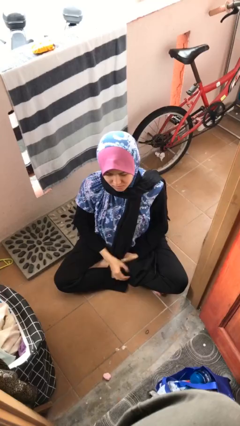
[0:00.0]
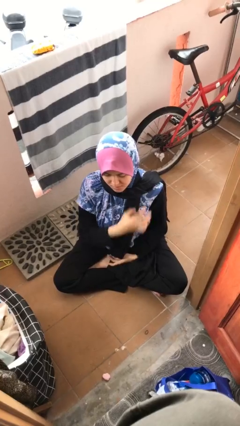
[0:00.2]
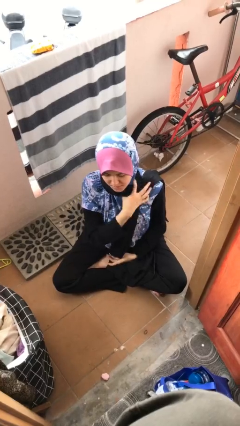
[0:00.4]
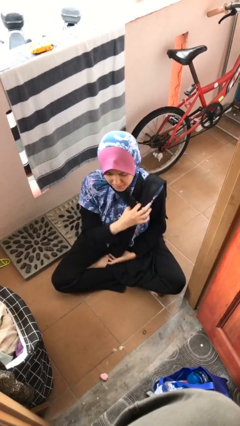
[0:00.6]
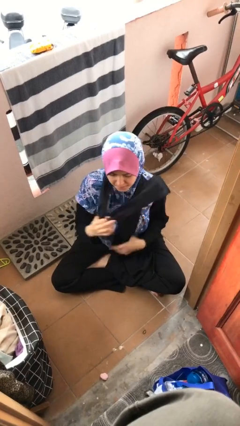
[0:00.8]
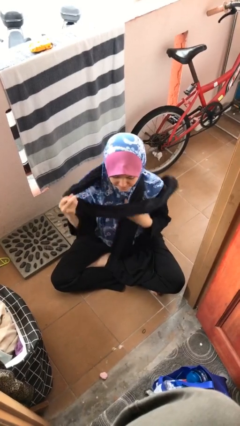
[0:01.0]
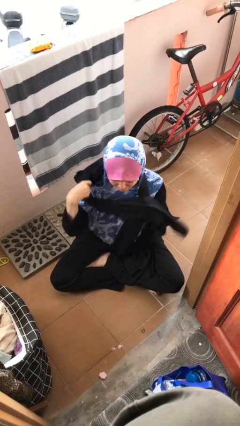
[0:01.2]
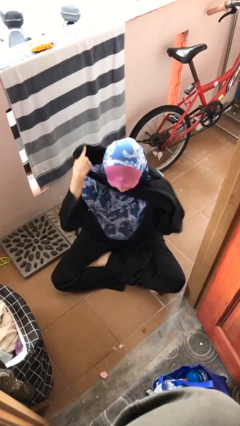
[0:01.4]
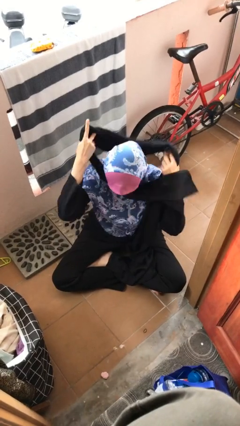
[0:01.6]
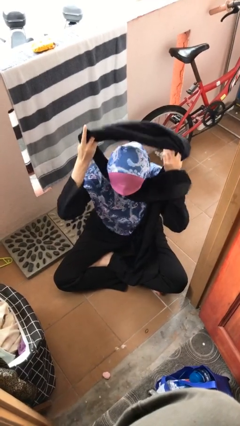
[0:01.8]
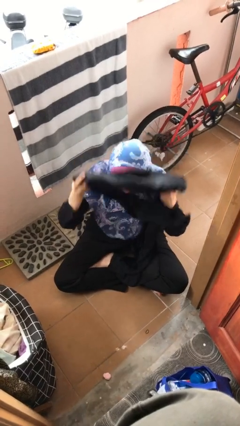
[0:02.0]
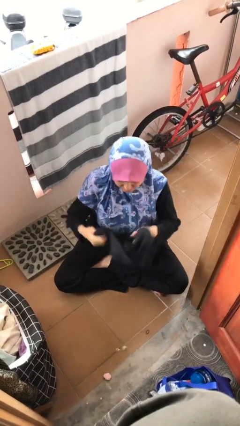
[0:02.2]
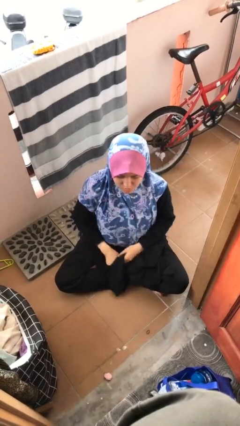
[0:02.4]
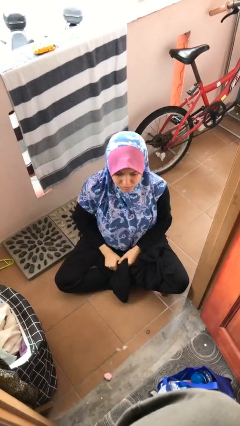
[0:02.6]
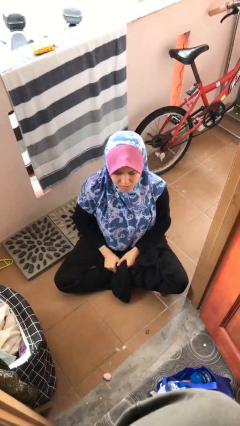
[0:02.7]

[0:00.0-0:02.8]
person takes off scarf

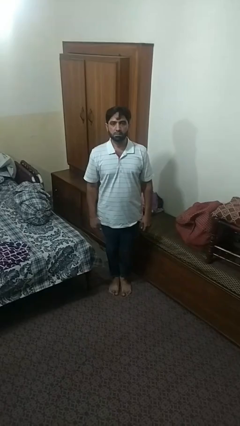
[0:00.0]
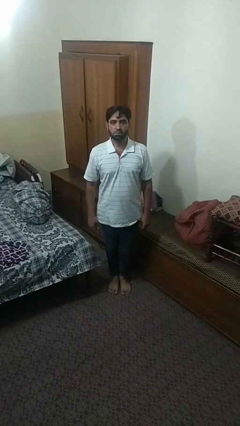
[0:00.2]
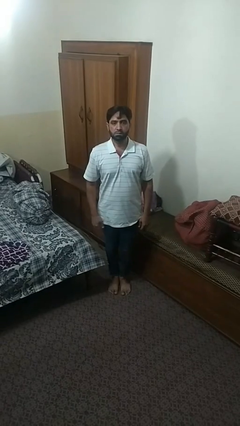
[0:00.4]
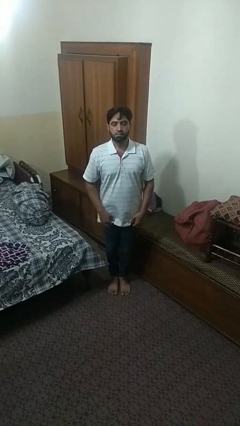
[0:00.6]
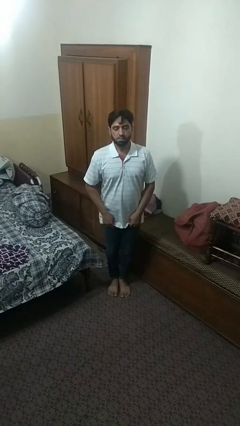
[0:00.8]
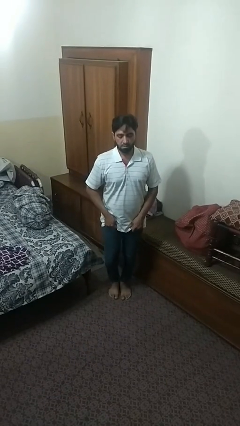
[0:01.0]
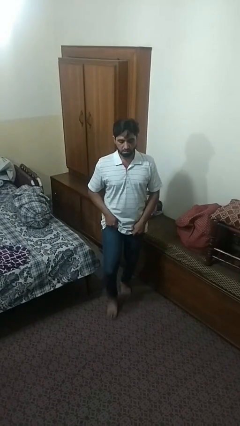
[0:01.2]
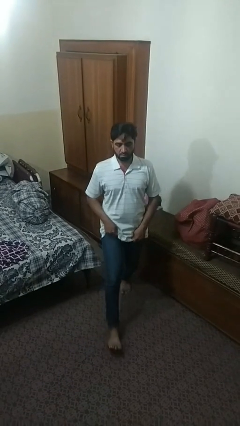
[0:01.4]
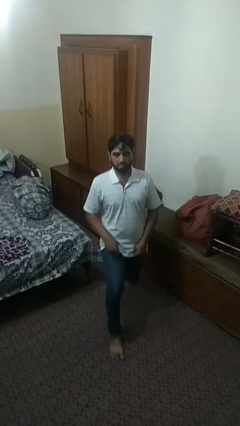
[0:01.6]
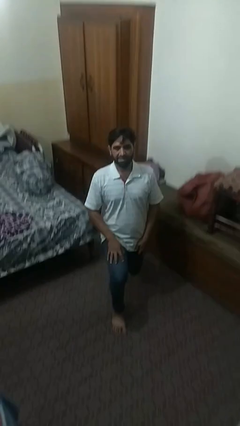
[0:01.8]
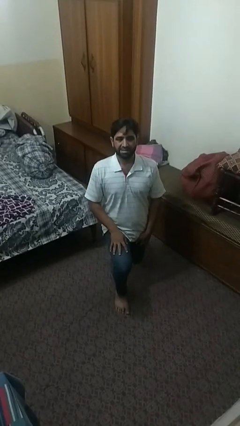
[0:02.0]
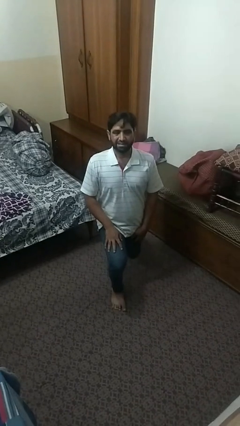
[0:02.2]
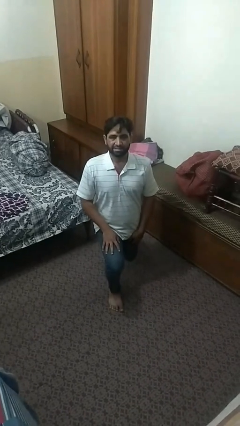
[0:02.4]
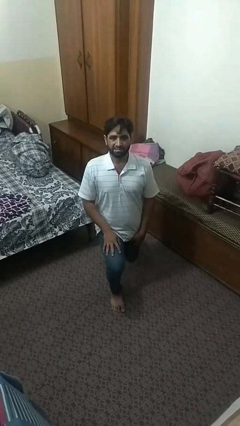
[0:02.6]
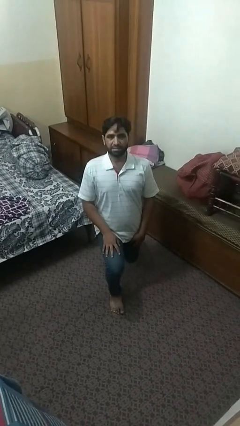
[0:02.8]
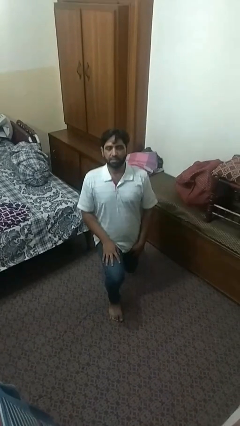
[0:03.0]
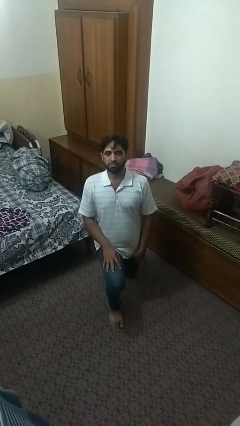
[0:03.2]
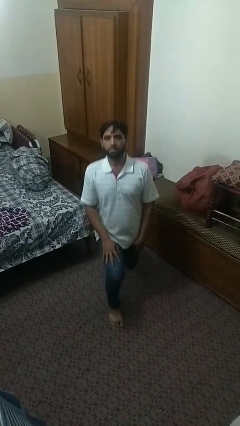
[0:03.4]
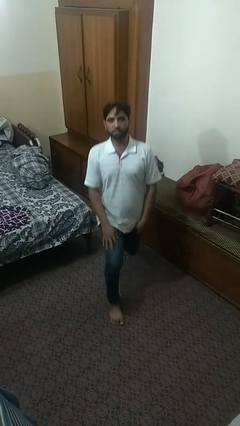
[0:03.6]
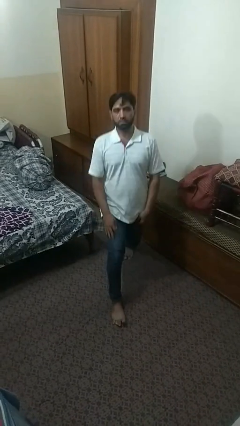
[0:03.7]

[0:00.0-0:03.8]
person exercises with lunges

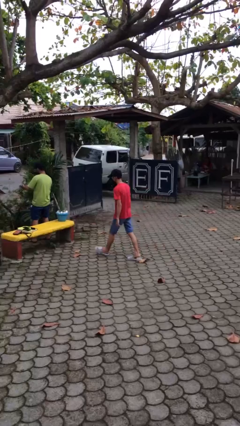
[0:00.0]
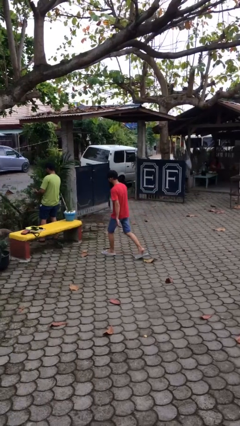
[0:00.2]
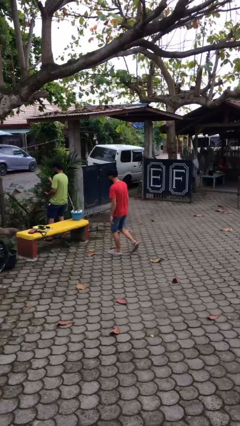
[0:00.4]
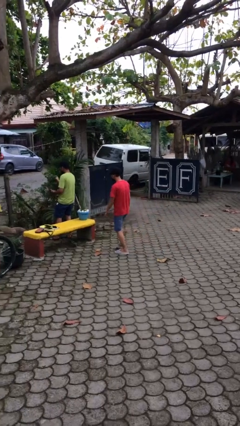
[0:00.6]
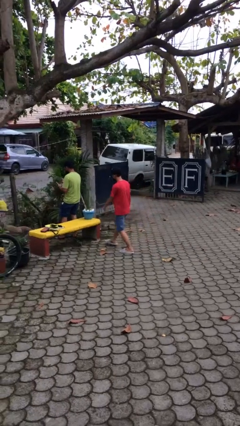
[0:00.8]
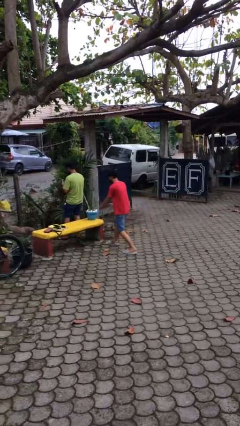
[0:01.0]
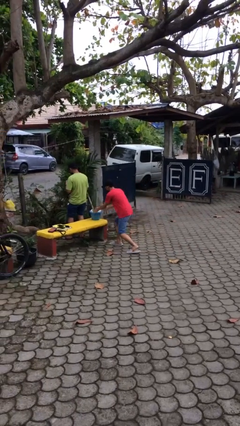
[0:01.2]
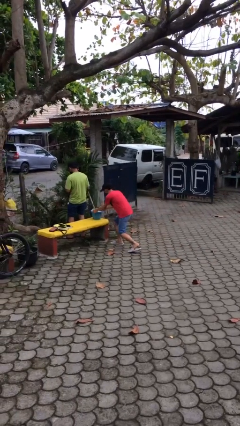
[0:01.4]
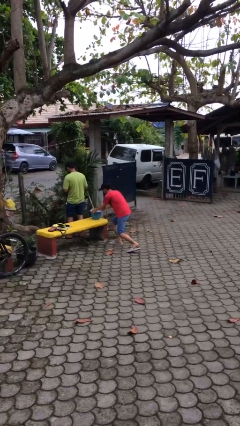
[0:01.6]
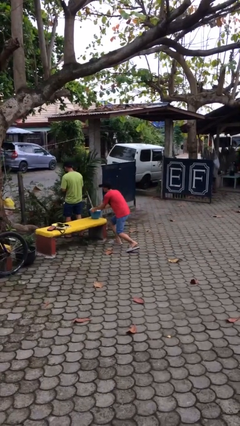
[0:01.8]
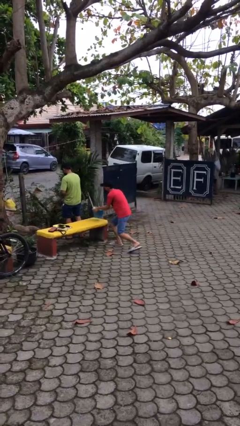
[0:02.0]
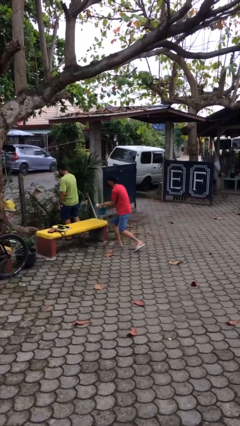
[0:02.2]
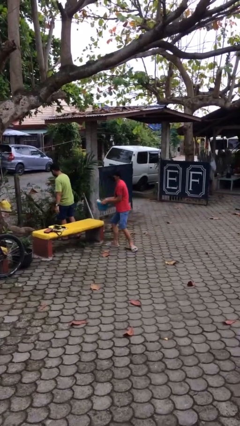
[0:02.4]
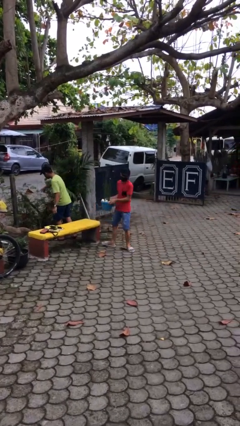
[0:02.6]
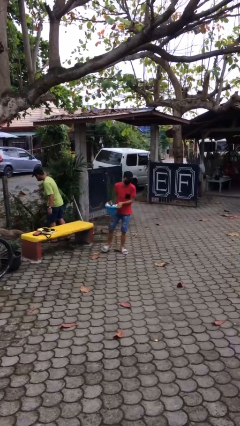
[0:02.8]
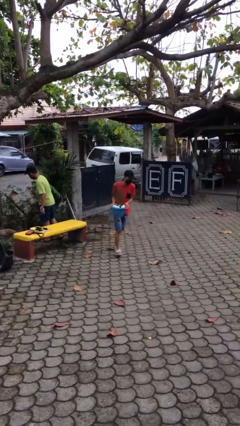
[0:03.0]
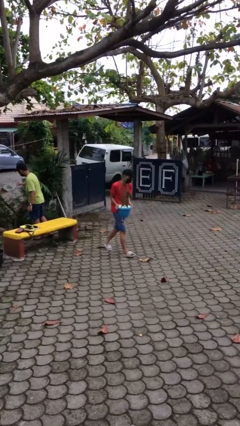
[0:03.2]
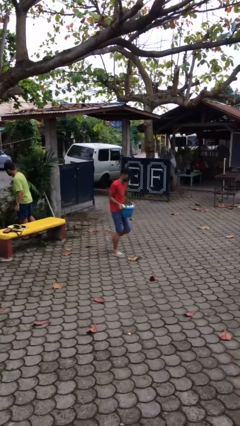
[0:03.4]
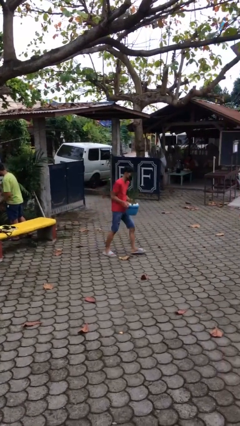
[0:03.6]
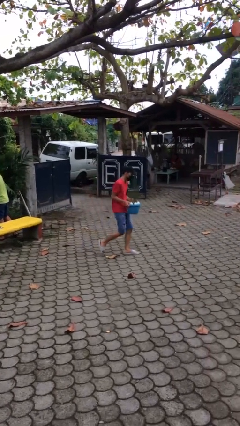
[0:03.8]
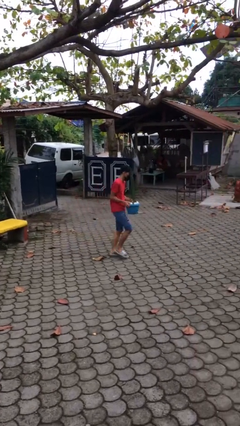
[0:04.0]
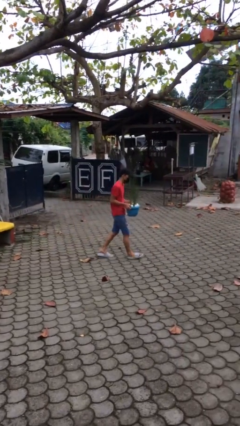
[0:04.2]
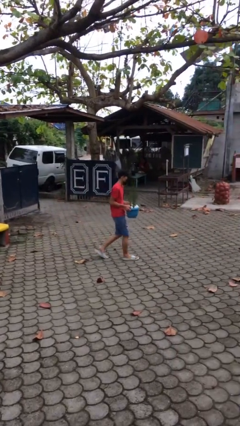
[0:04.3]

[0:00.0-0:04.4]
person steals object from person

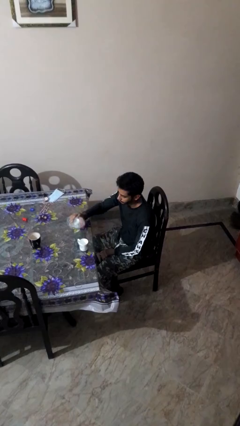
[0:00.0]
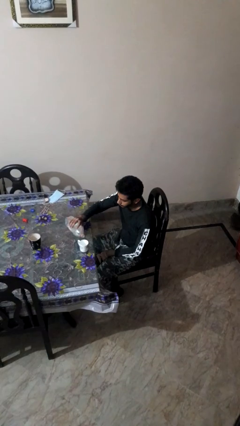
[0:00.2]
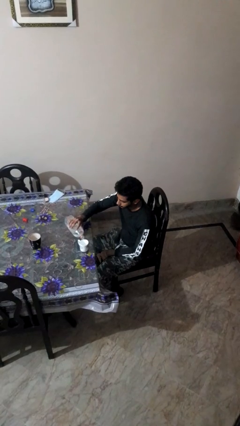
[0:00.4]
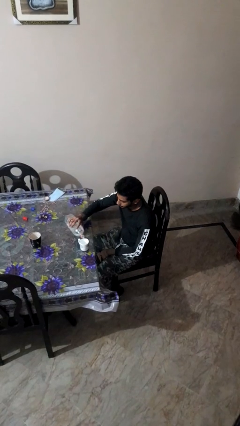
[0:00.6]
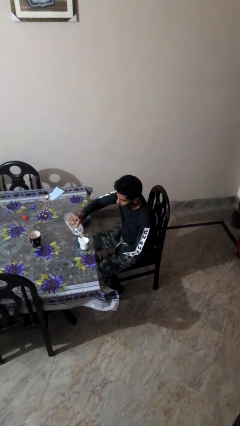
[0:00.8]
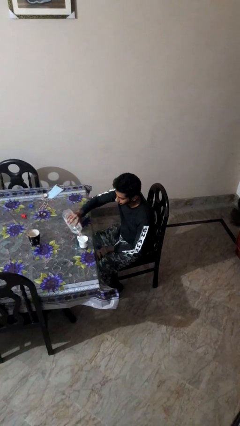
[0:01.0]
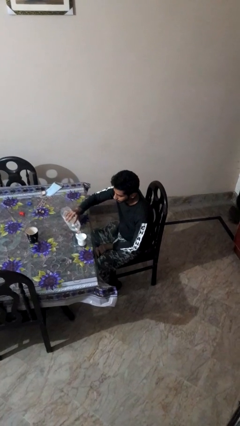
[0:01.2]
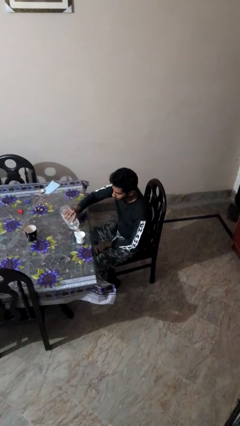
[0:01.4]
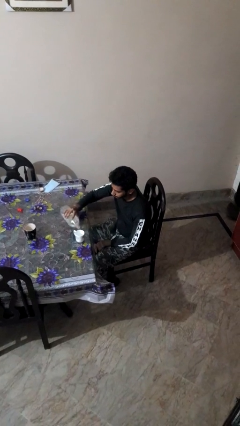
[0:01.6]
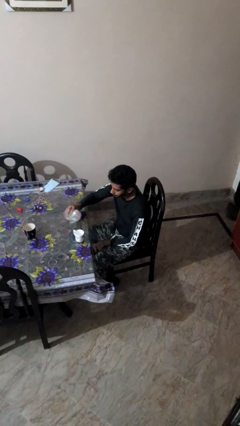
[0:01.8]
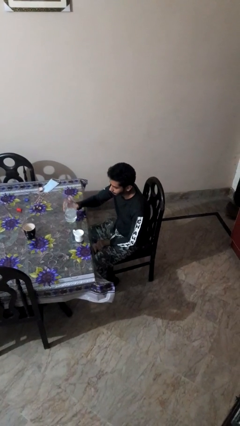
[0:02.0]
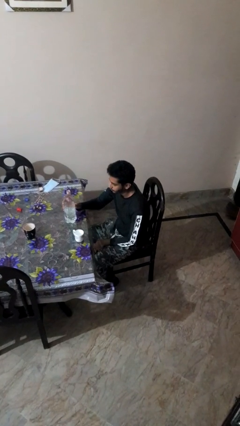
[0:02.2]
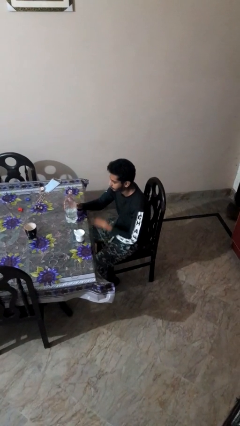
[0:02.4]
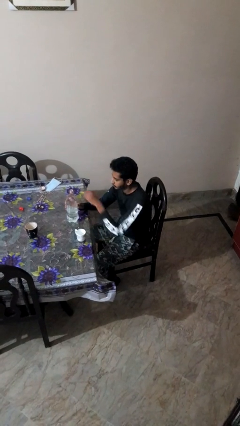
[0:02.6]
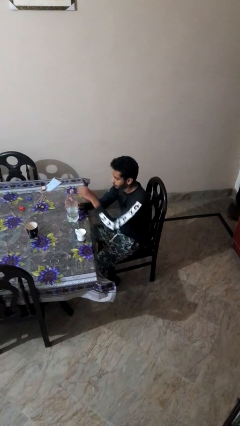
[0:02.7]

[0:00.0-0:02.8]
person pours liquid into cup

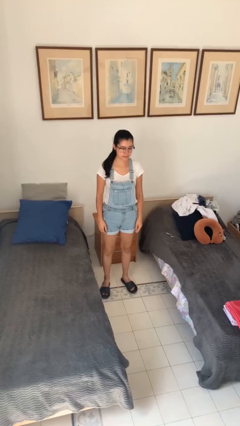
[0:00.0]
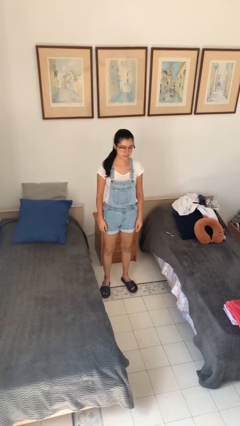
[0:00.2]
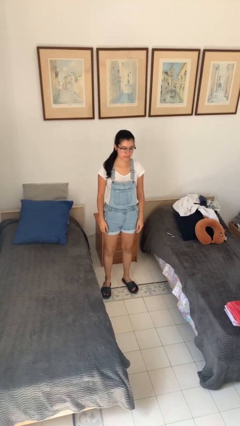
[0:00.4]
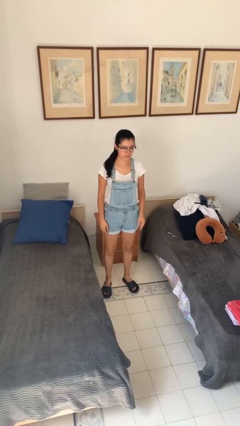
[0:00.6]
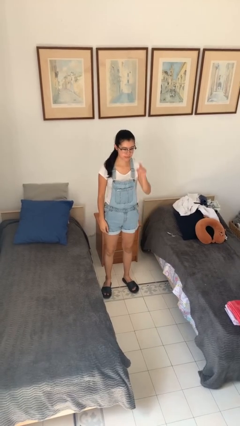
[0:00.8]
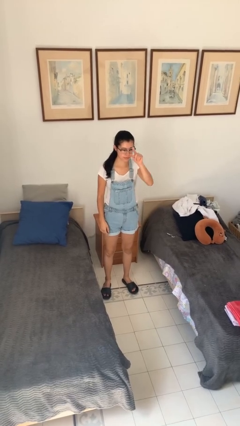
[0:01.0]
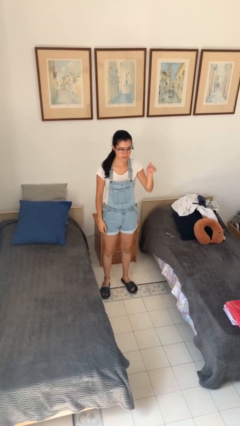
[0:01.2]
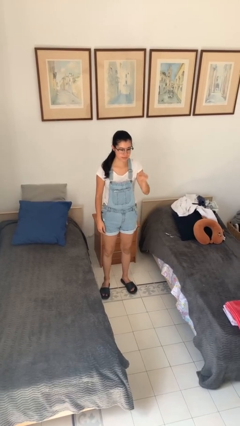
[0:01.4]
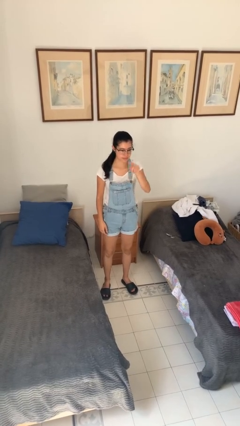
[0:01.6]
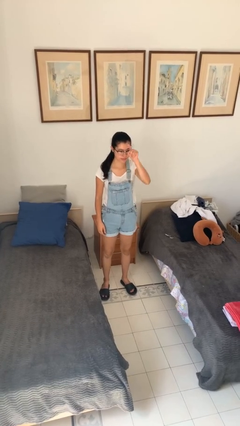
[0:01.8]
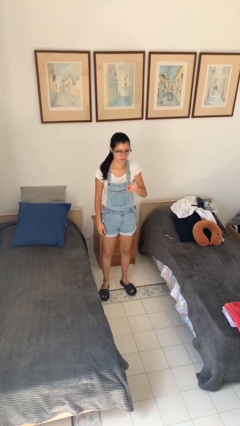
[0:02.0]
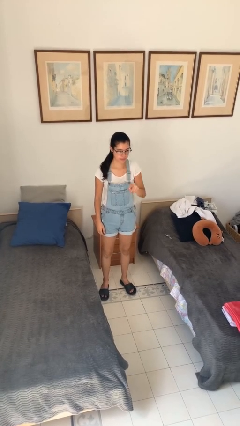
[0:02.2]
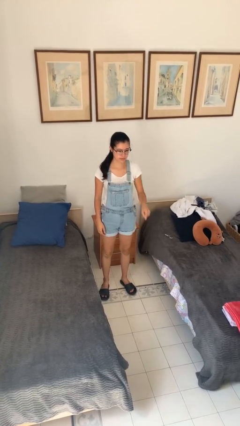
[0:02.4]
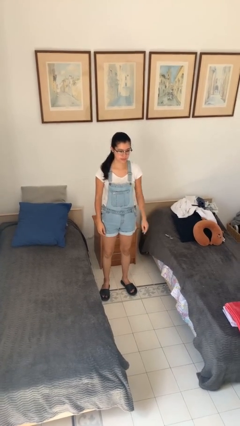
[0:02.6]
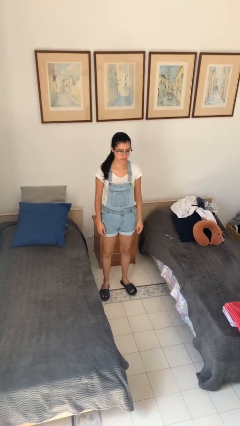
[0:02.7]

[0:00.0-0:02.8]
person gestures number four

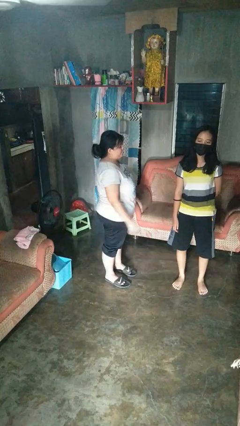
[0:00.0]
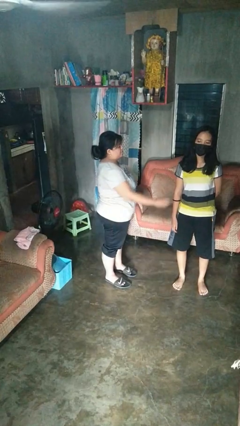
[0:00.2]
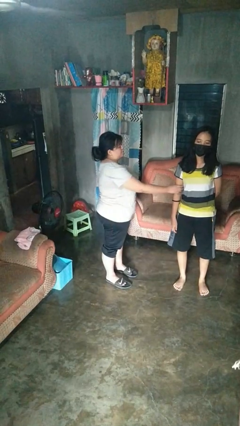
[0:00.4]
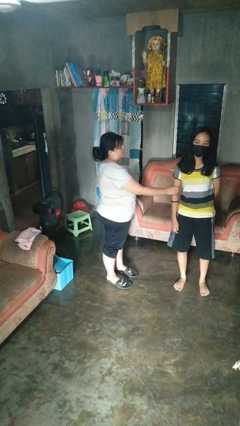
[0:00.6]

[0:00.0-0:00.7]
person grabs person by bicep

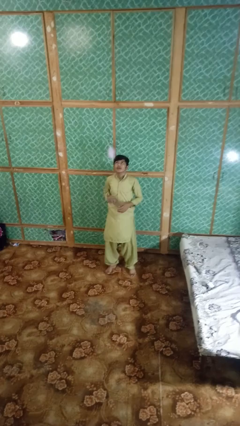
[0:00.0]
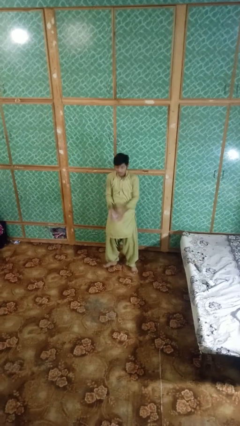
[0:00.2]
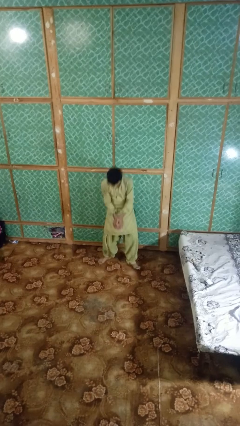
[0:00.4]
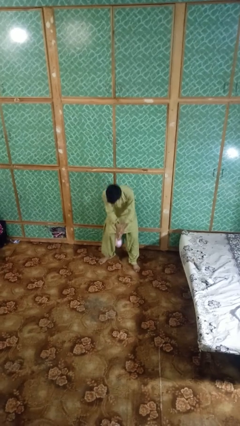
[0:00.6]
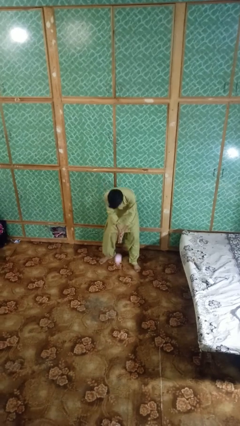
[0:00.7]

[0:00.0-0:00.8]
person catches dropped object
